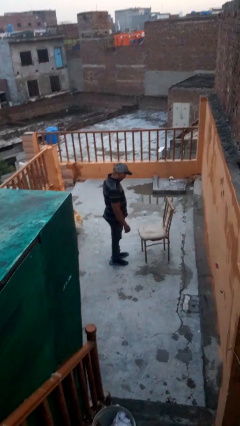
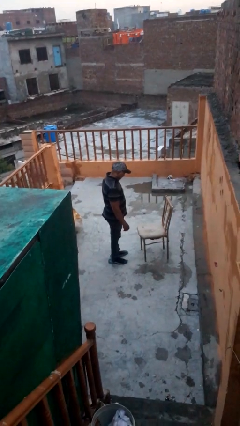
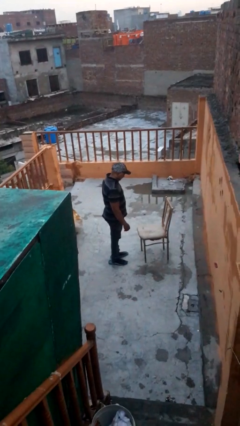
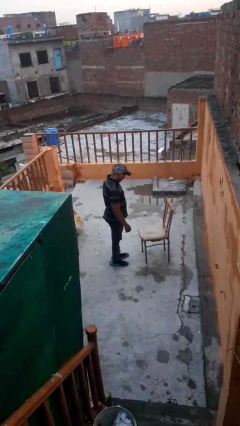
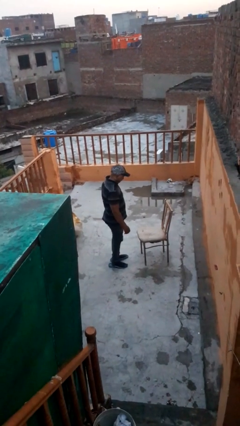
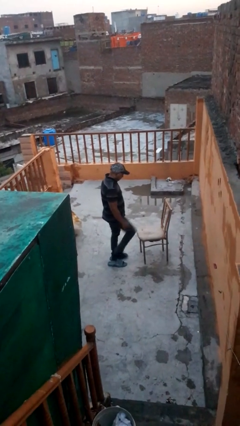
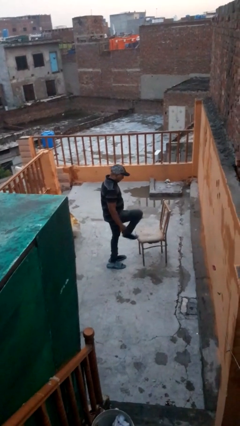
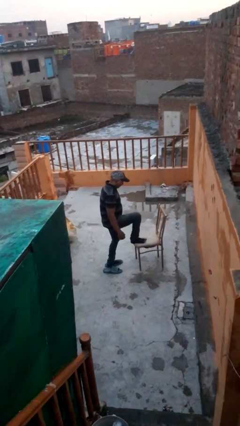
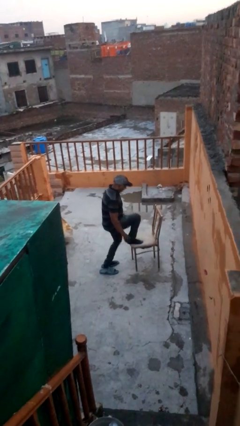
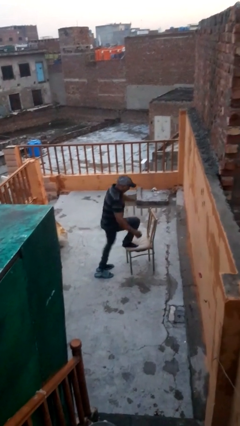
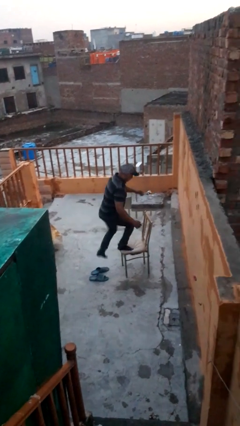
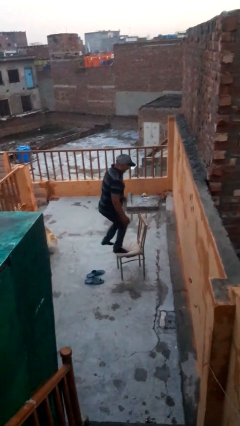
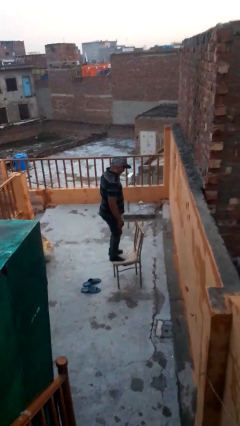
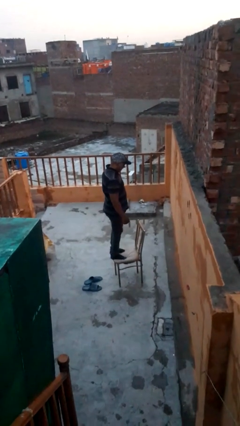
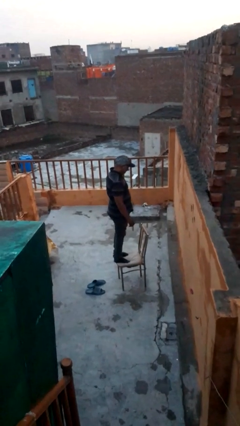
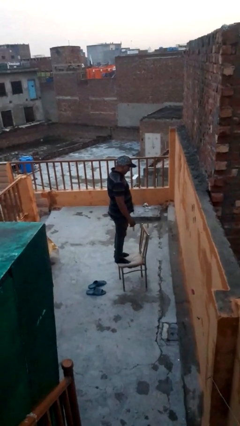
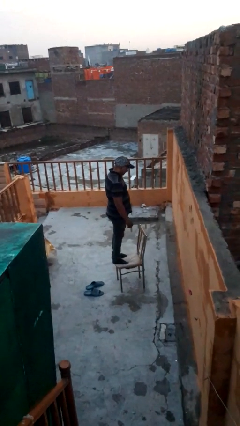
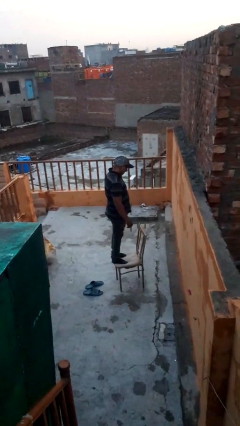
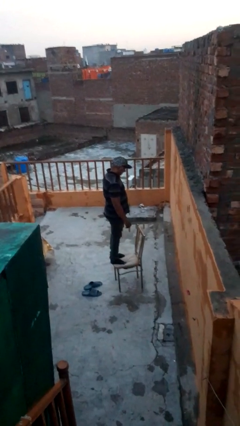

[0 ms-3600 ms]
person climbs on chair

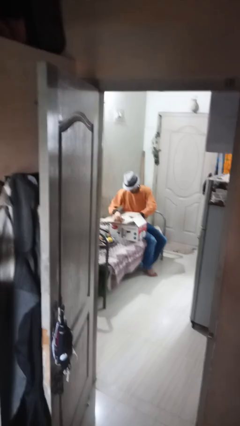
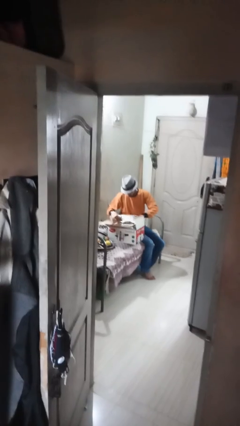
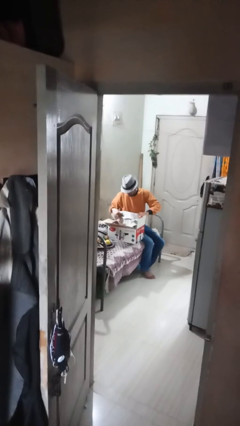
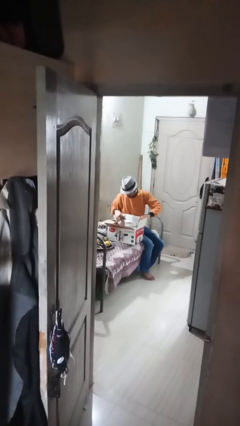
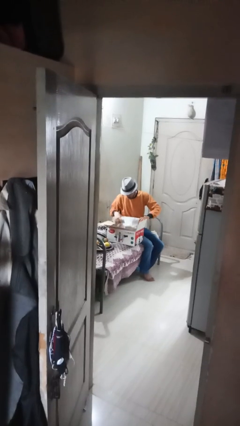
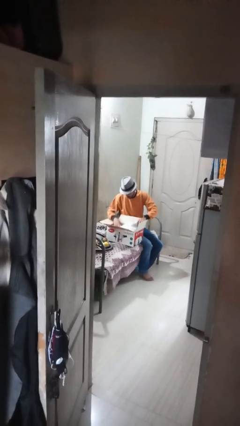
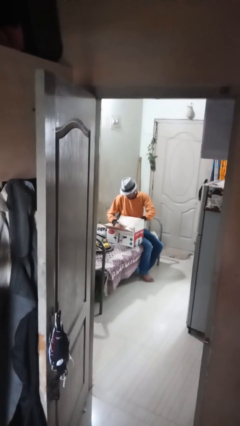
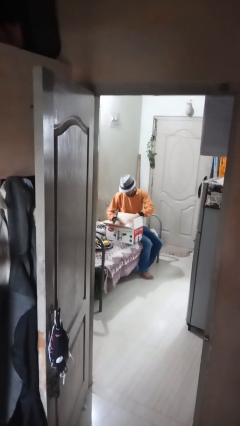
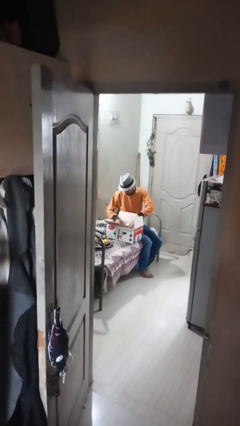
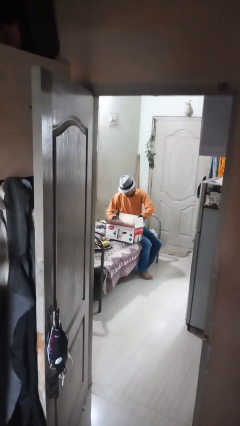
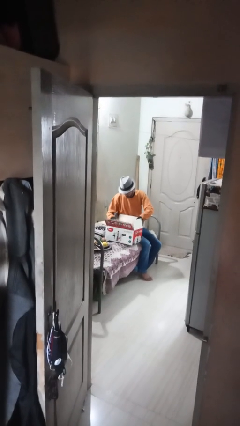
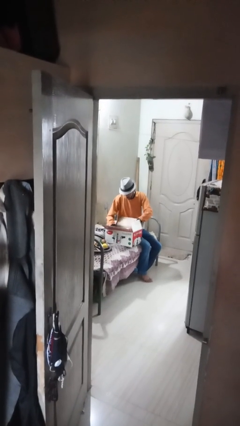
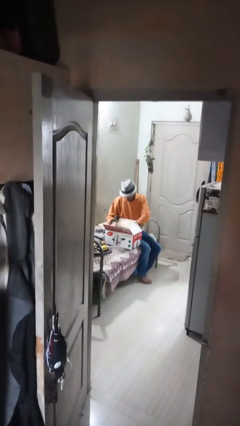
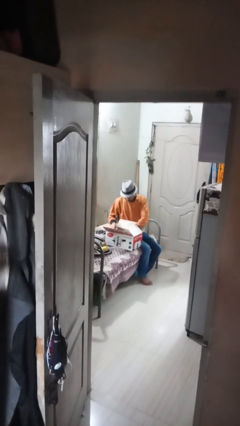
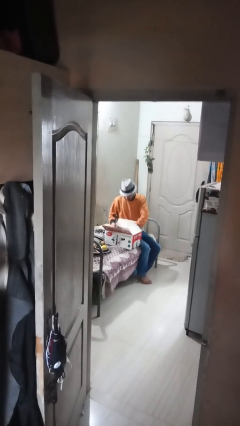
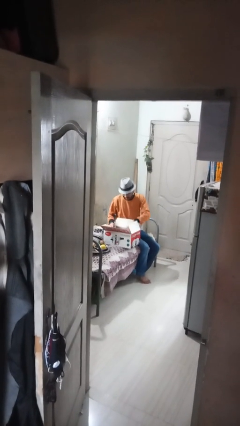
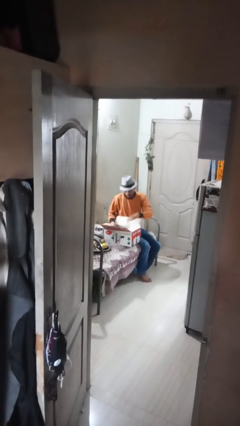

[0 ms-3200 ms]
person searches in box

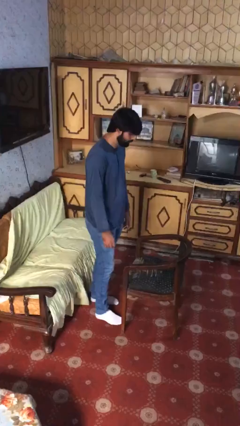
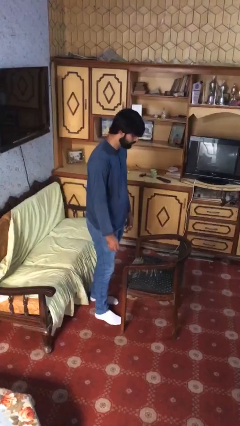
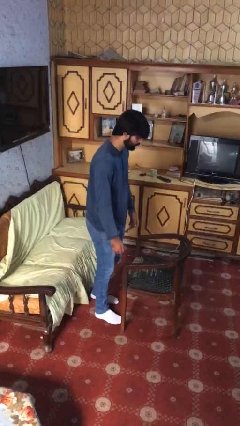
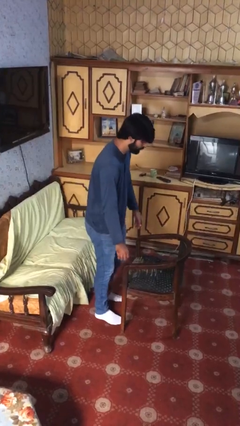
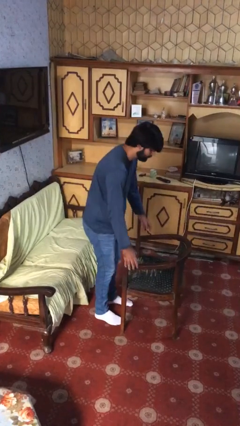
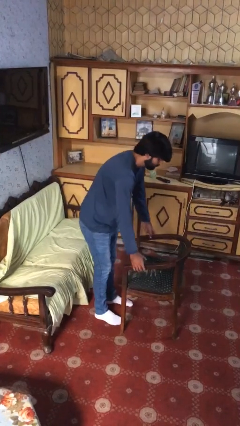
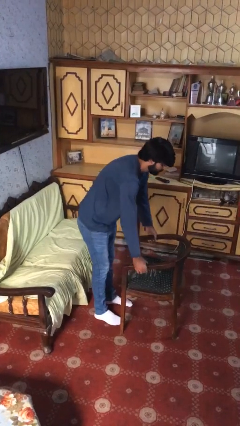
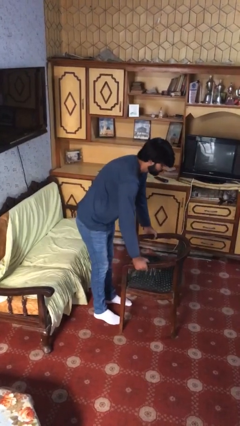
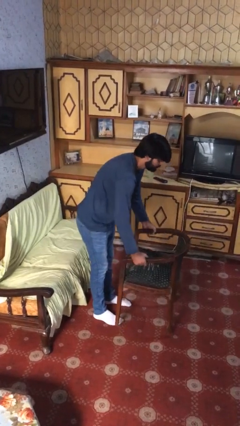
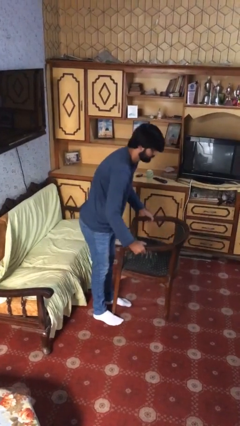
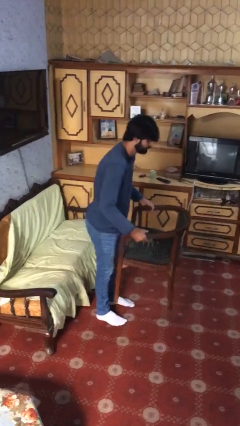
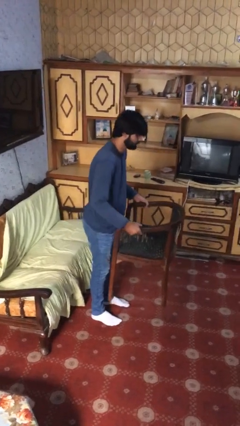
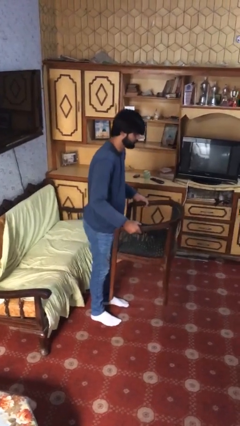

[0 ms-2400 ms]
person picks up object from floor

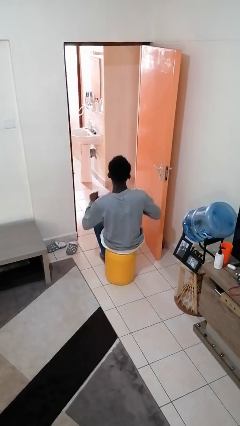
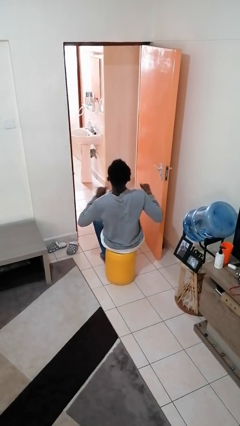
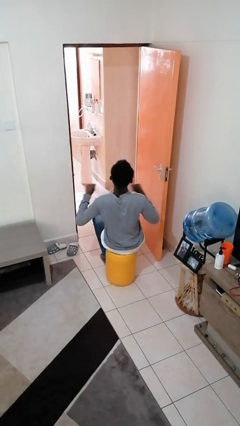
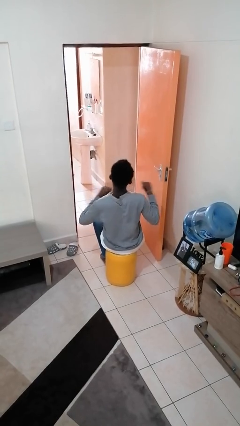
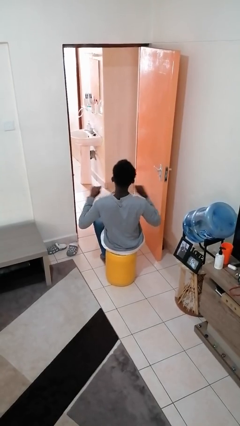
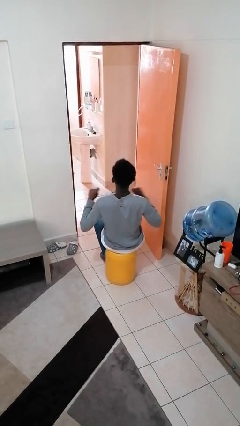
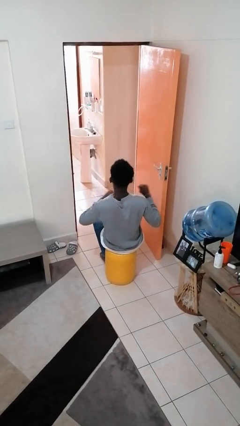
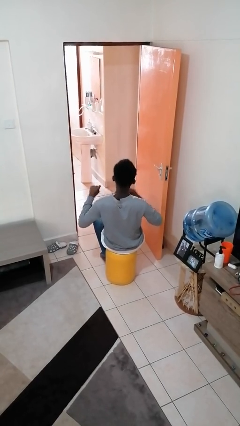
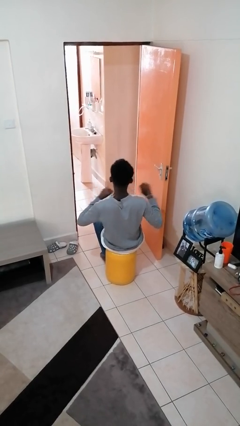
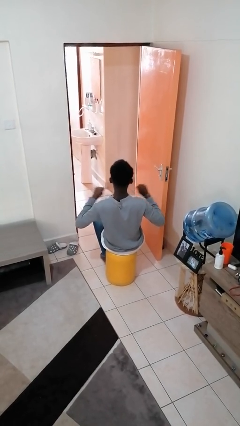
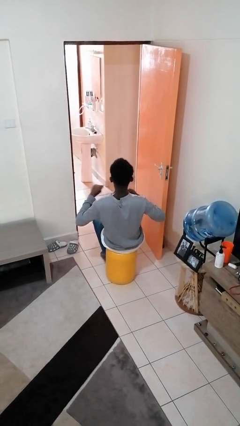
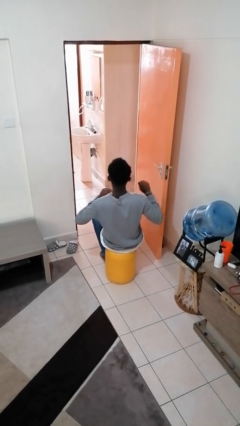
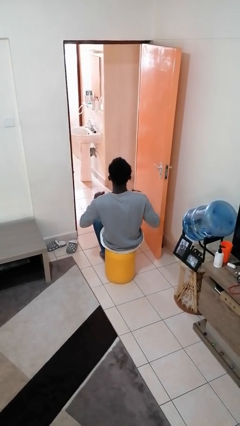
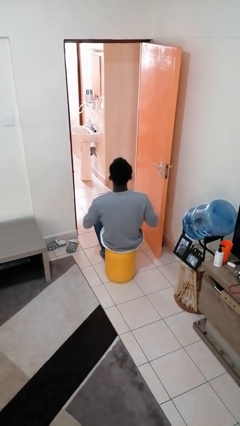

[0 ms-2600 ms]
person drums on chest

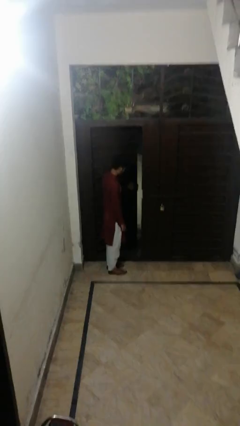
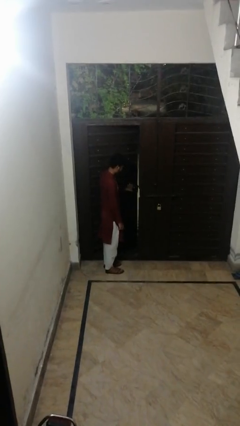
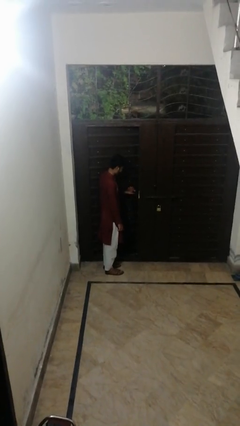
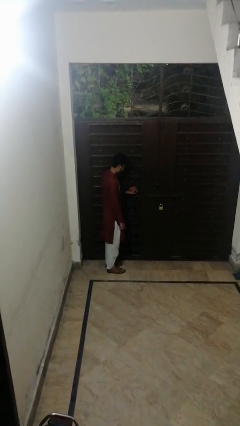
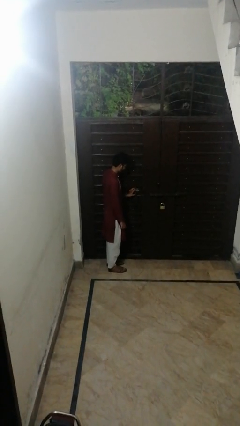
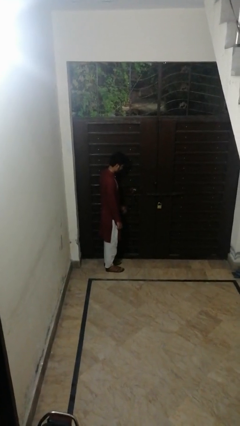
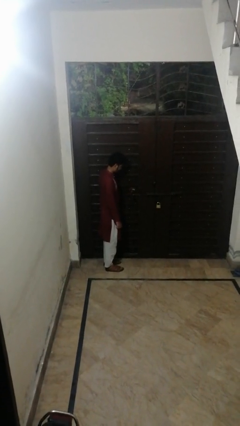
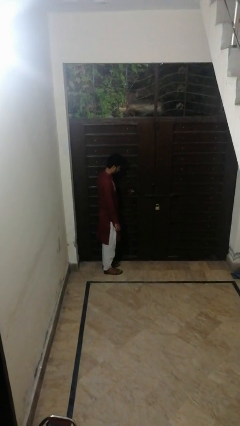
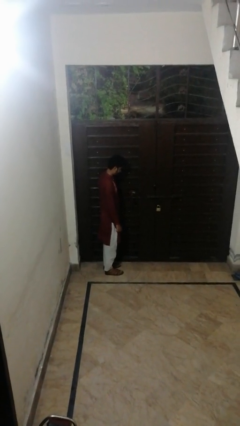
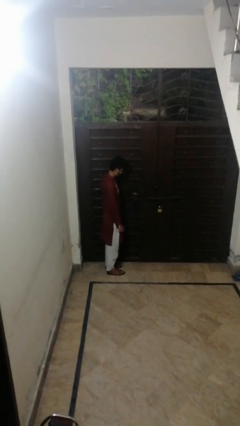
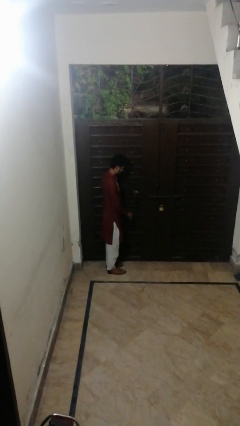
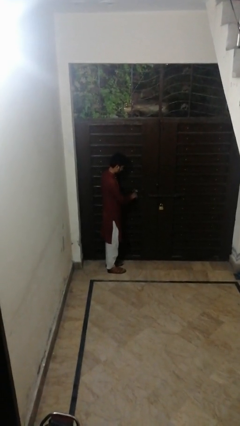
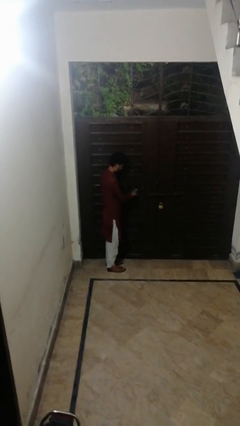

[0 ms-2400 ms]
person closes facility door

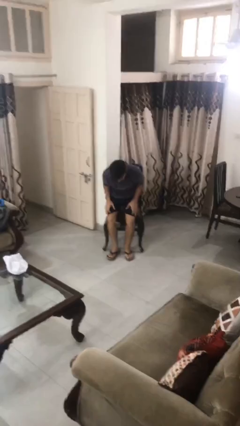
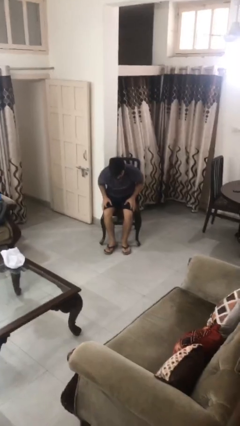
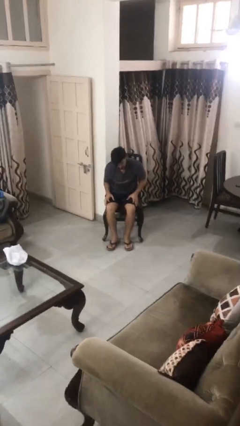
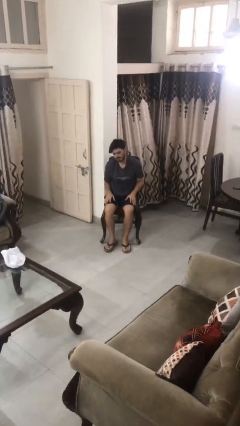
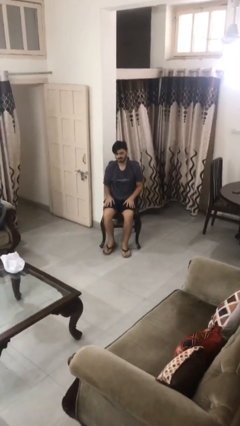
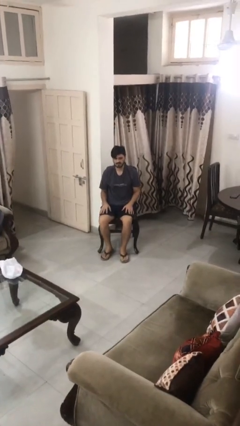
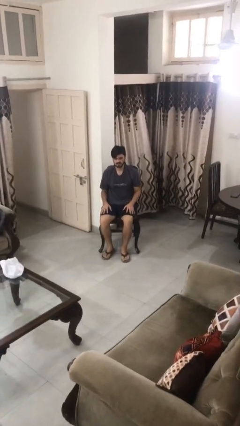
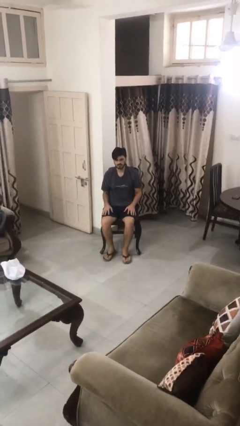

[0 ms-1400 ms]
person sits down

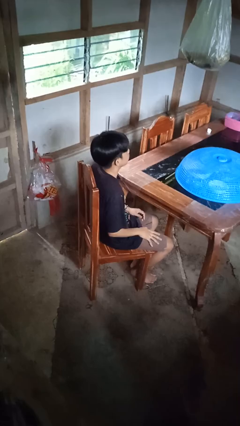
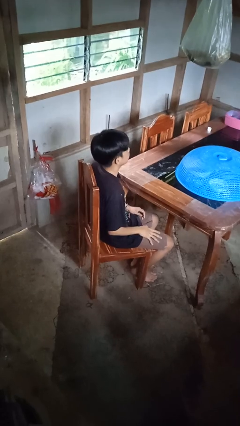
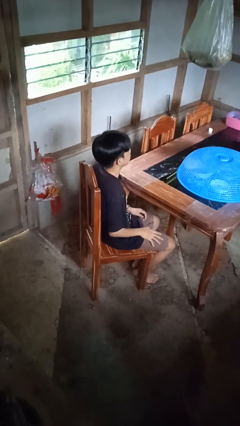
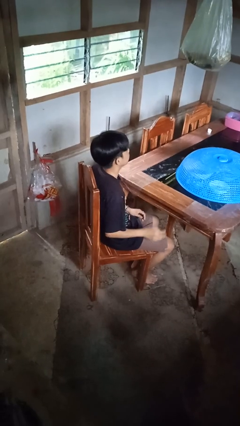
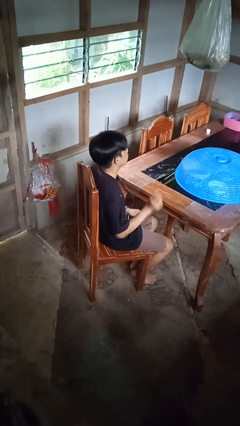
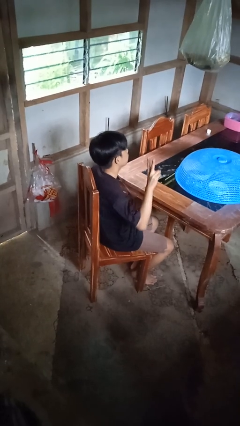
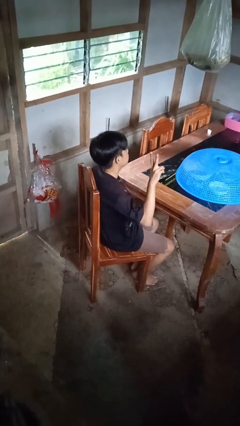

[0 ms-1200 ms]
person gestures peace

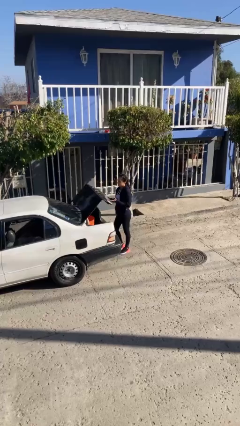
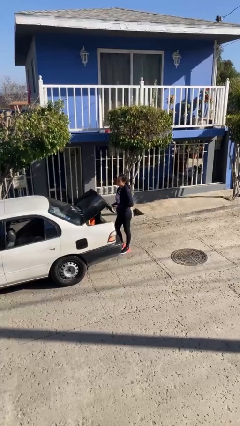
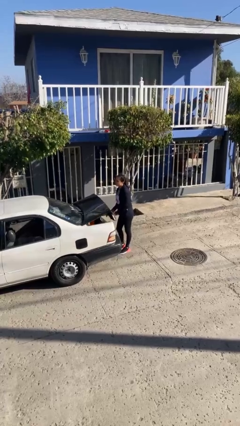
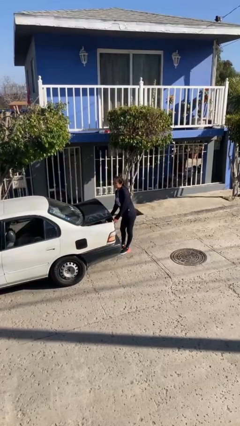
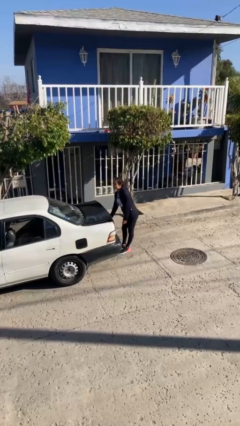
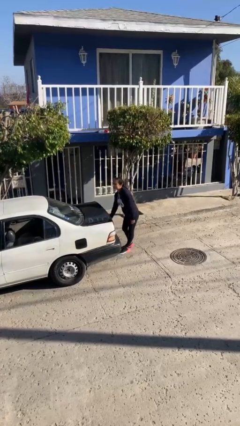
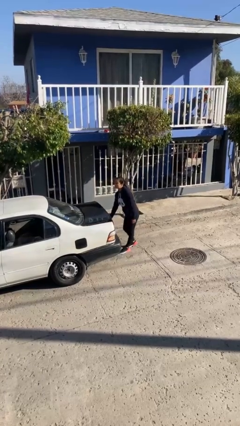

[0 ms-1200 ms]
person closes car trunk
